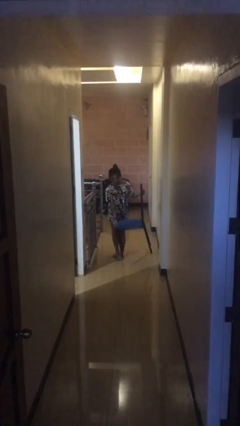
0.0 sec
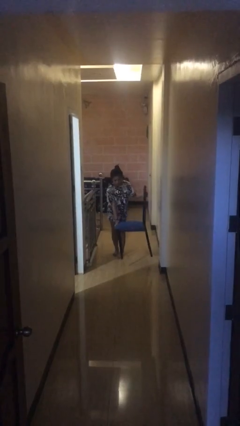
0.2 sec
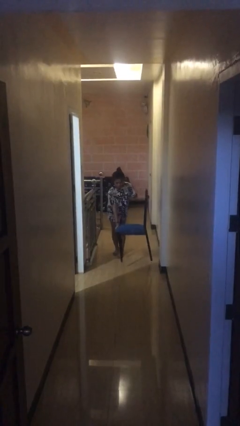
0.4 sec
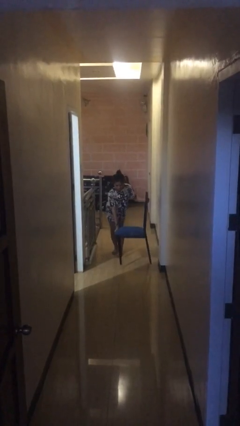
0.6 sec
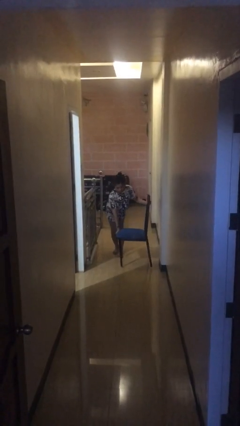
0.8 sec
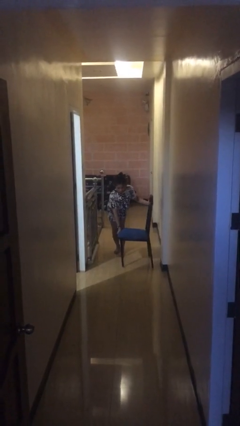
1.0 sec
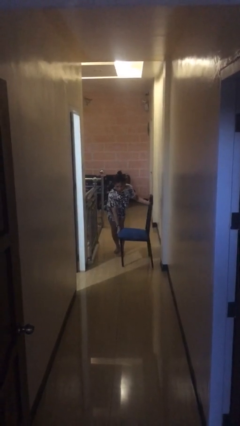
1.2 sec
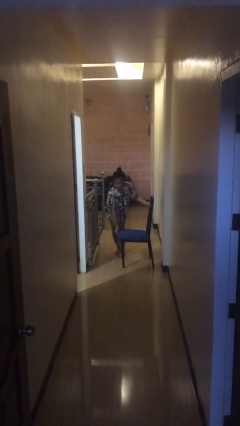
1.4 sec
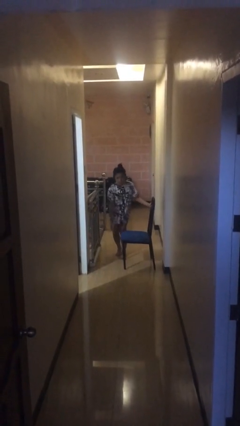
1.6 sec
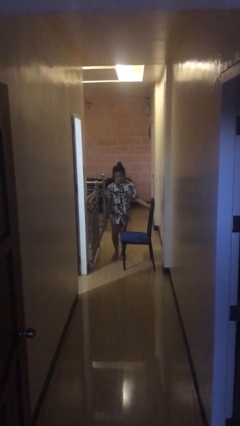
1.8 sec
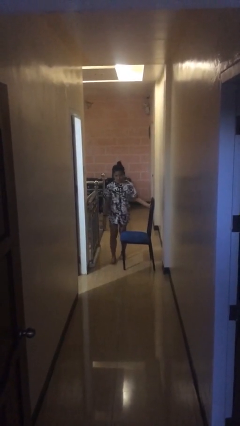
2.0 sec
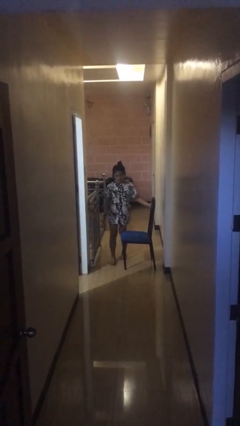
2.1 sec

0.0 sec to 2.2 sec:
person puts down object on floor

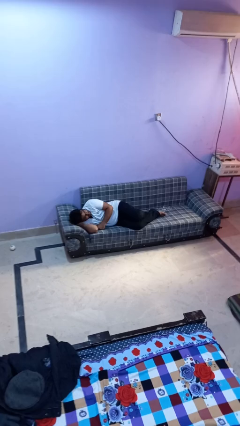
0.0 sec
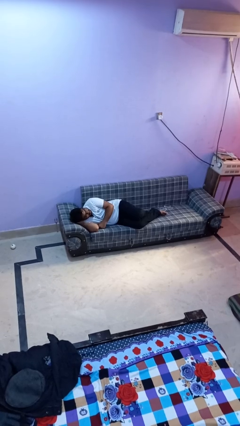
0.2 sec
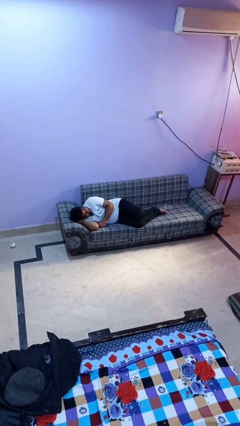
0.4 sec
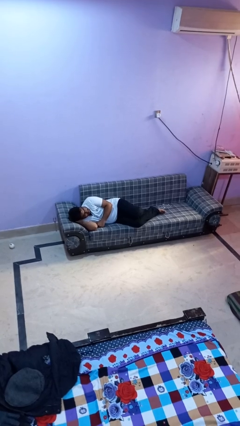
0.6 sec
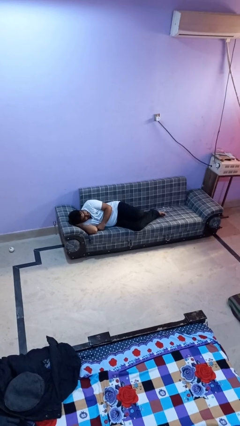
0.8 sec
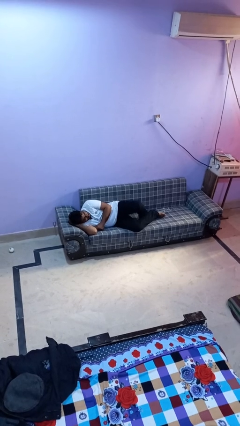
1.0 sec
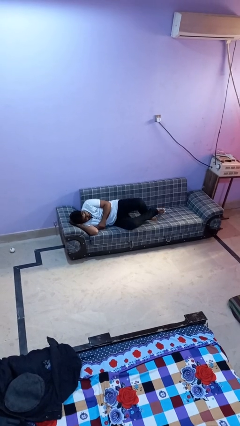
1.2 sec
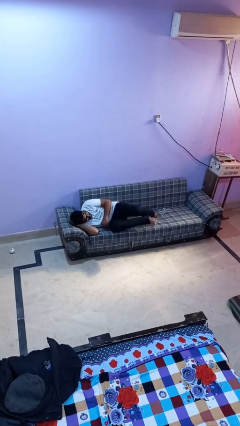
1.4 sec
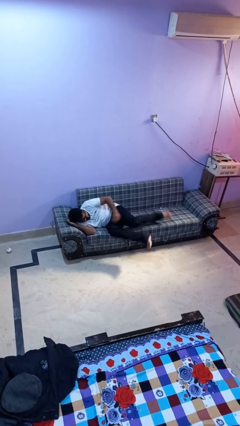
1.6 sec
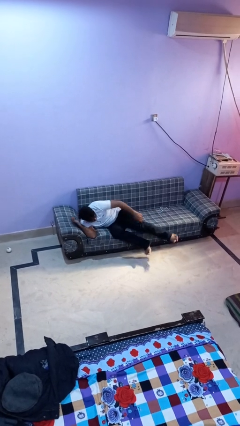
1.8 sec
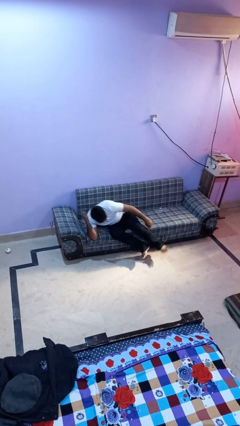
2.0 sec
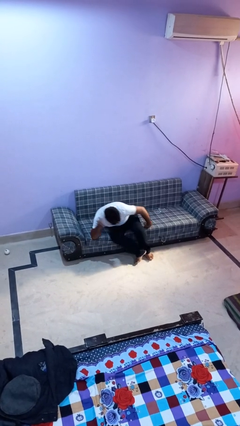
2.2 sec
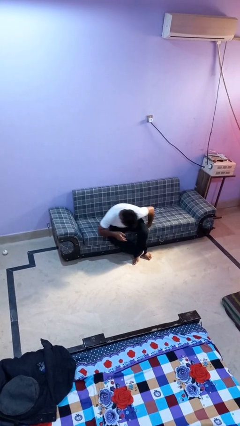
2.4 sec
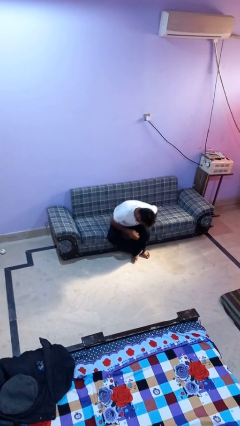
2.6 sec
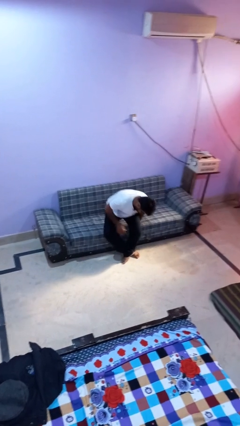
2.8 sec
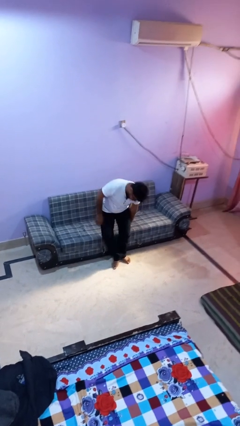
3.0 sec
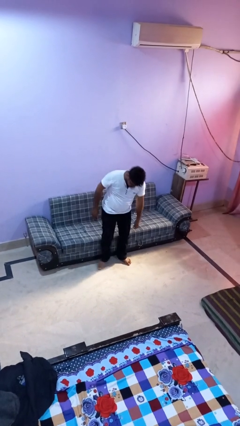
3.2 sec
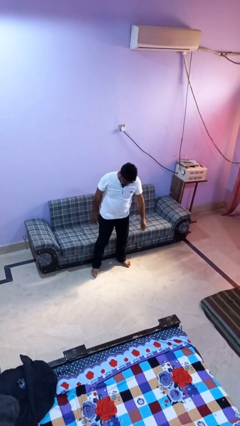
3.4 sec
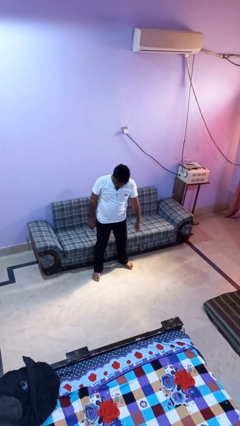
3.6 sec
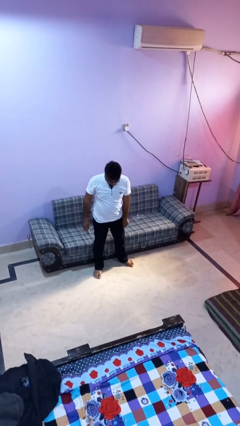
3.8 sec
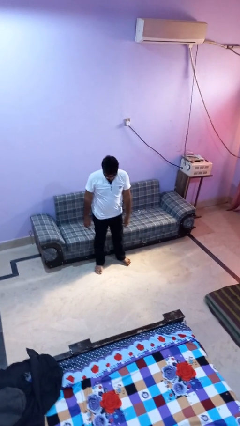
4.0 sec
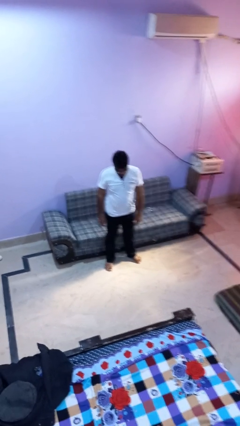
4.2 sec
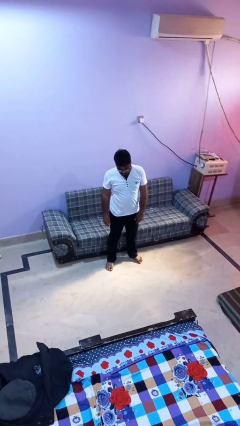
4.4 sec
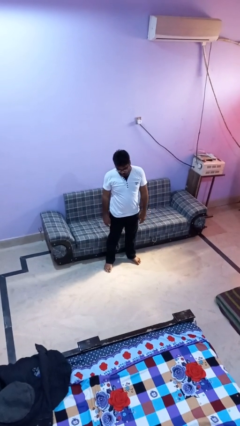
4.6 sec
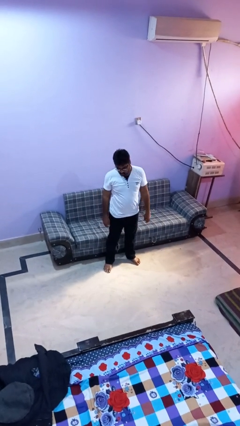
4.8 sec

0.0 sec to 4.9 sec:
person stands up

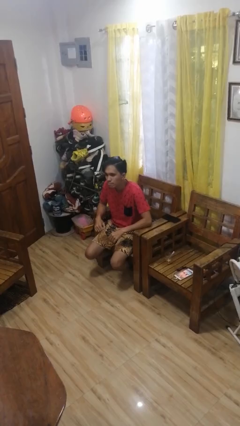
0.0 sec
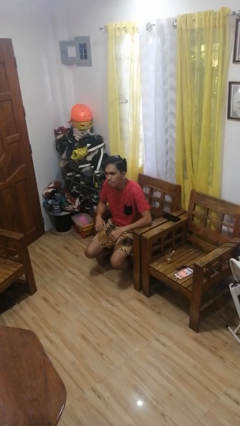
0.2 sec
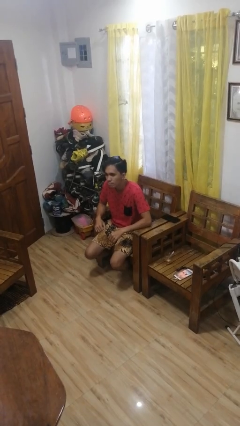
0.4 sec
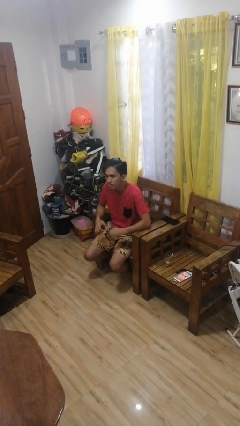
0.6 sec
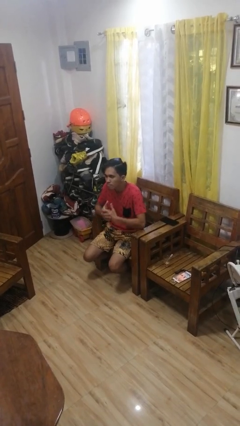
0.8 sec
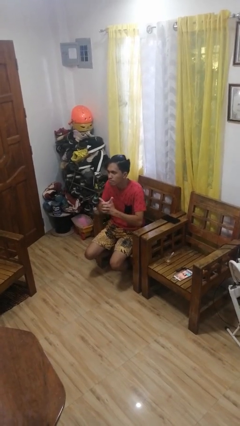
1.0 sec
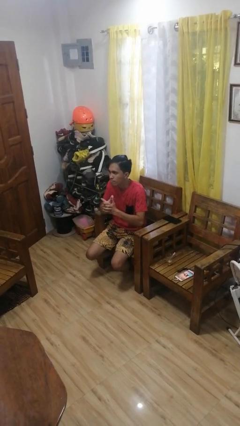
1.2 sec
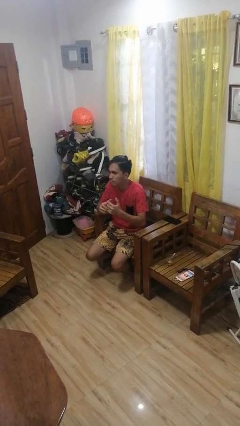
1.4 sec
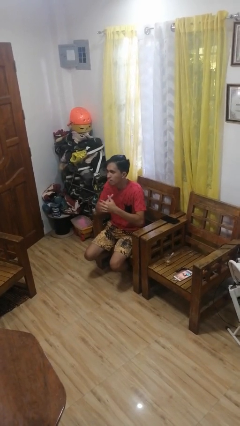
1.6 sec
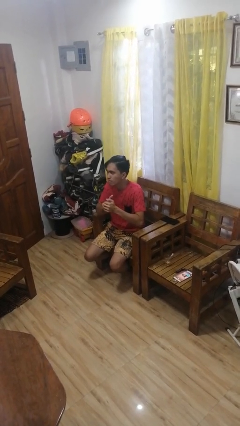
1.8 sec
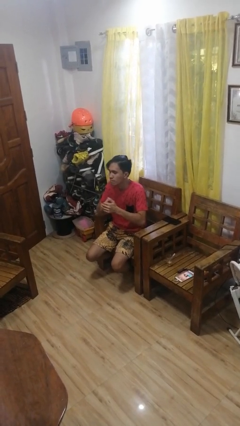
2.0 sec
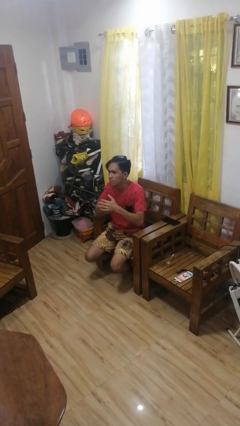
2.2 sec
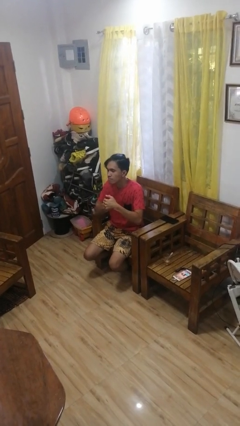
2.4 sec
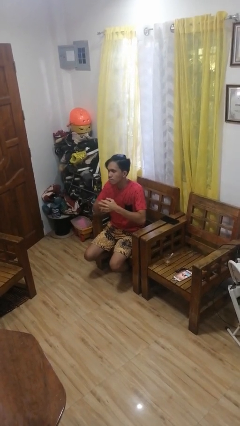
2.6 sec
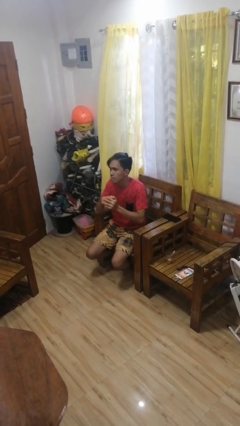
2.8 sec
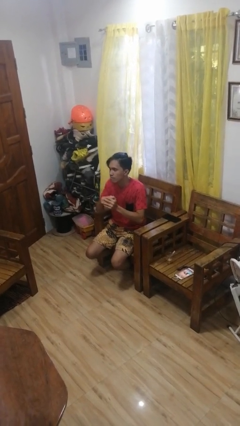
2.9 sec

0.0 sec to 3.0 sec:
person cracks knuckles

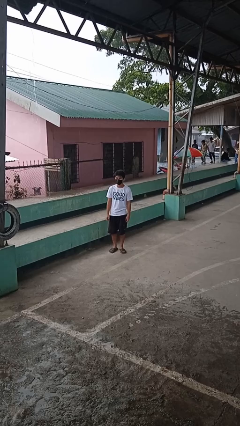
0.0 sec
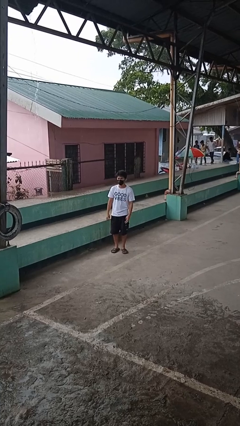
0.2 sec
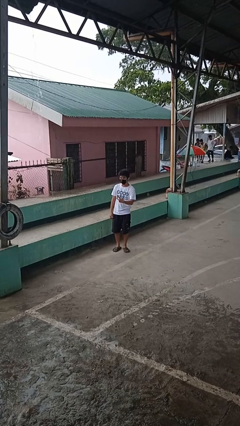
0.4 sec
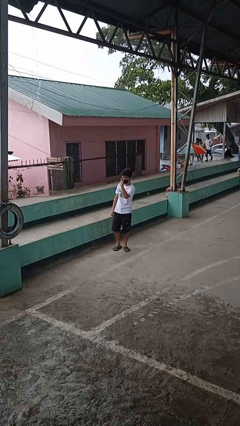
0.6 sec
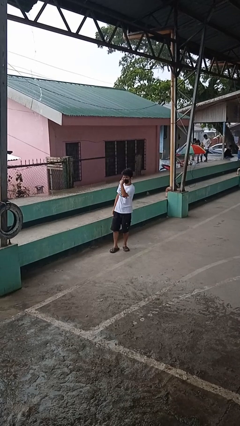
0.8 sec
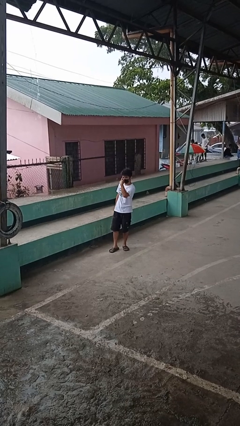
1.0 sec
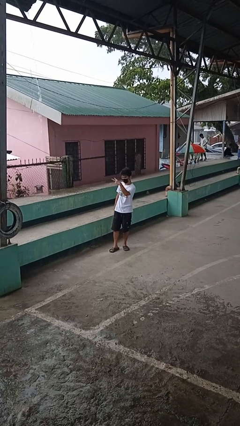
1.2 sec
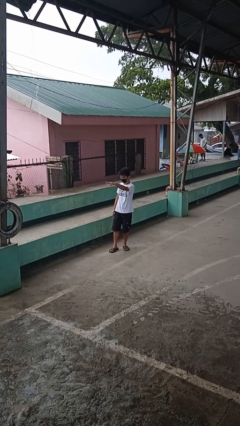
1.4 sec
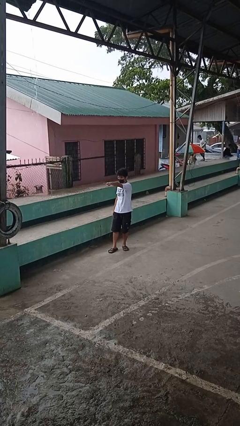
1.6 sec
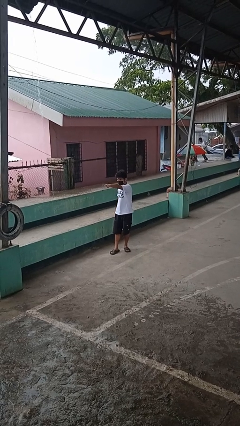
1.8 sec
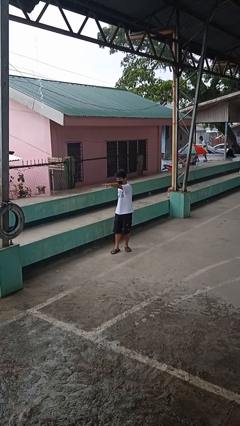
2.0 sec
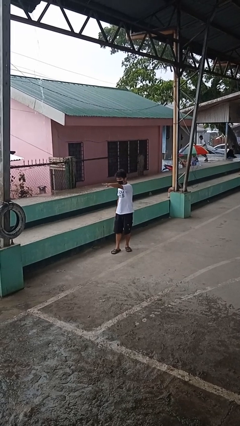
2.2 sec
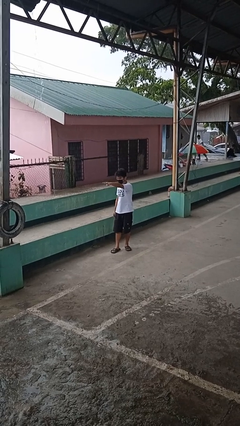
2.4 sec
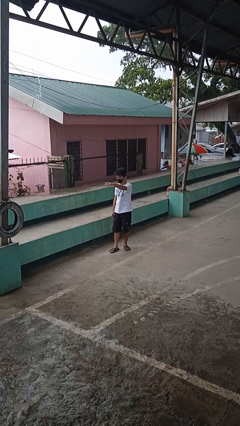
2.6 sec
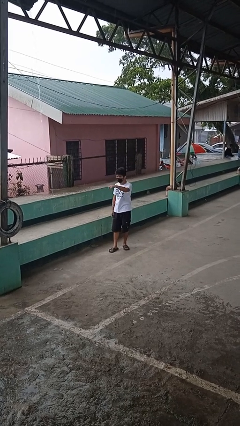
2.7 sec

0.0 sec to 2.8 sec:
person gestures watch closely

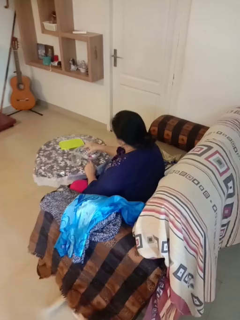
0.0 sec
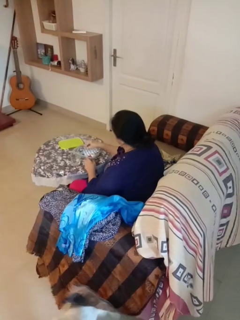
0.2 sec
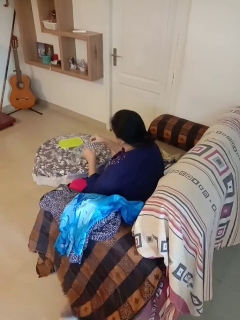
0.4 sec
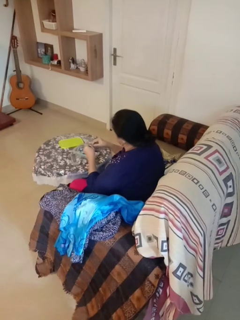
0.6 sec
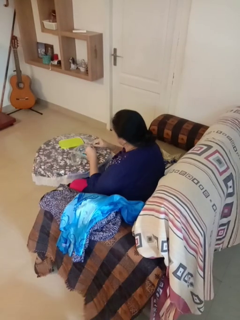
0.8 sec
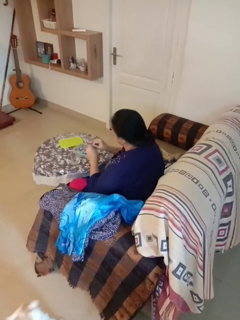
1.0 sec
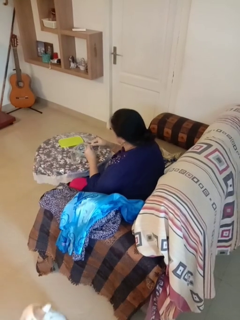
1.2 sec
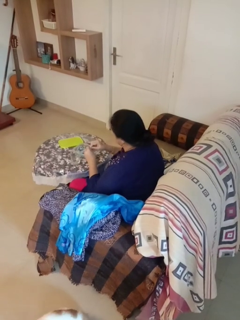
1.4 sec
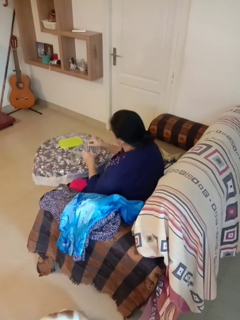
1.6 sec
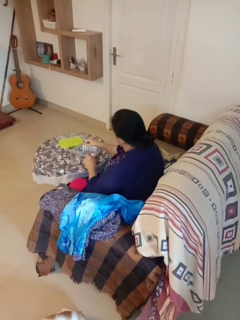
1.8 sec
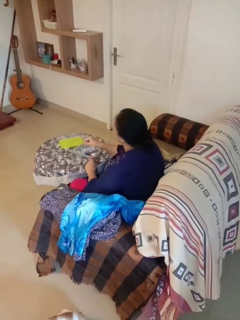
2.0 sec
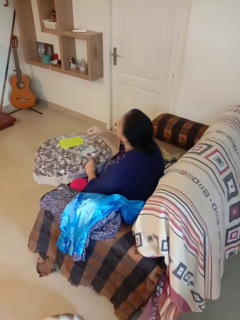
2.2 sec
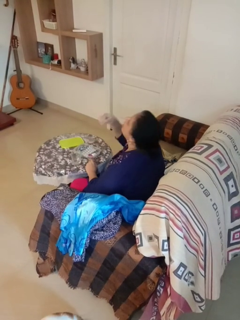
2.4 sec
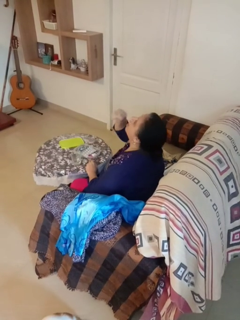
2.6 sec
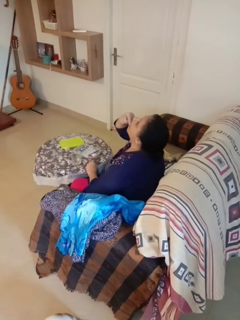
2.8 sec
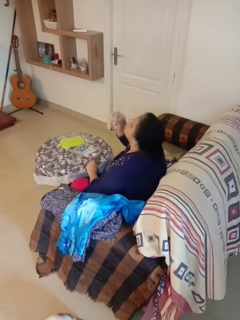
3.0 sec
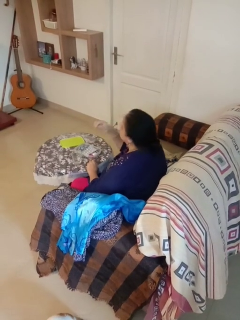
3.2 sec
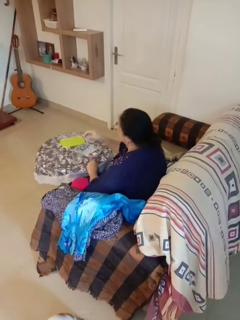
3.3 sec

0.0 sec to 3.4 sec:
person takes medicine pills

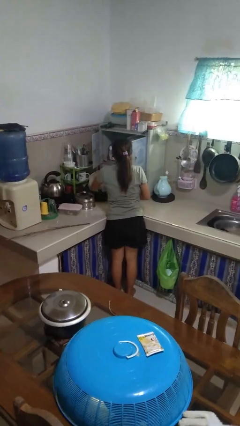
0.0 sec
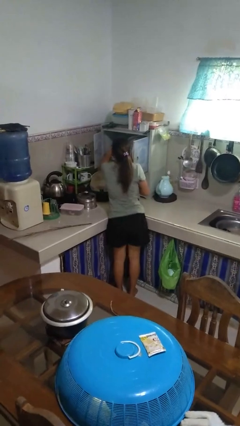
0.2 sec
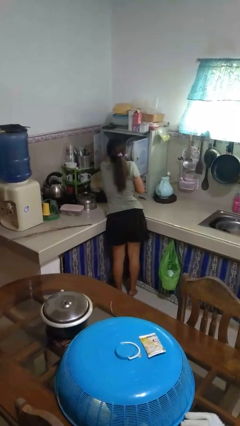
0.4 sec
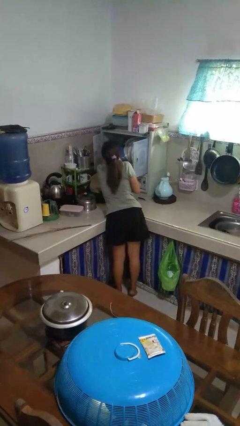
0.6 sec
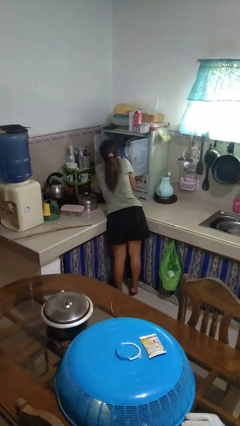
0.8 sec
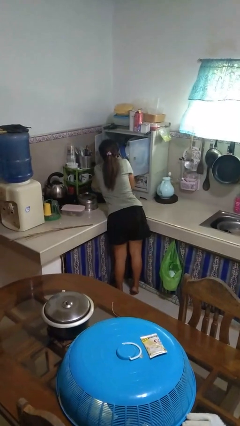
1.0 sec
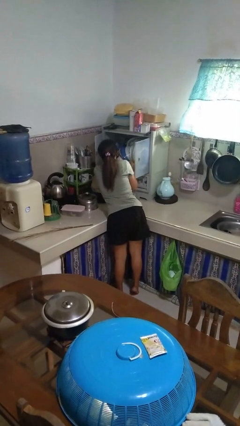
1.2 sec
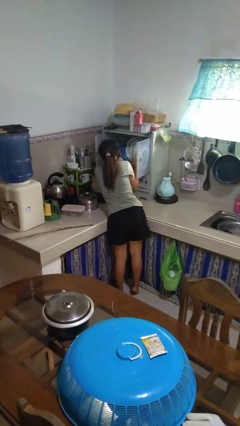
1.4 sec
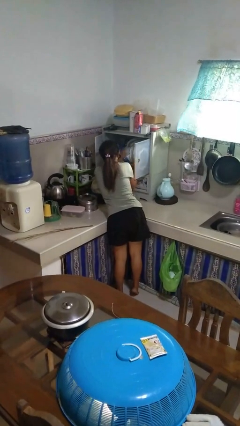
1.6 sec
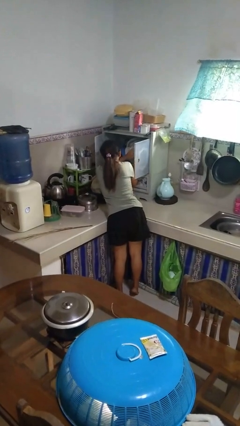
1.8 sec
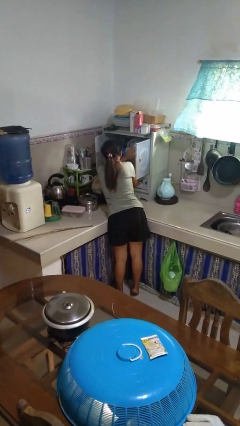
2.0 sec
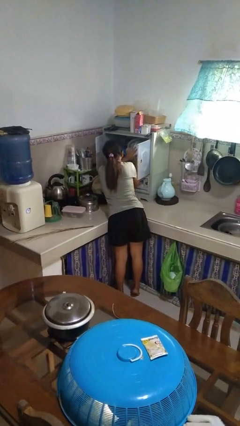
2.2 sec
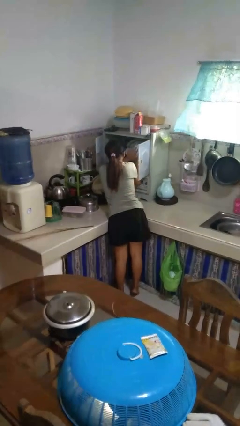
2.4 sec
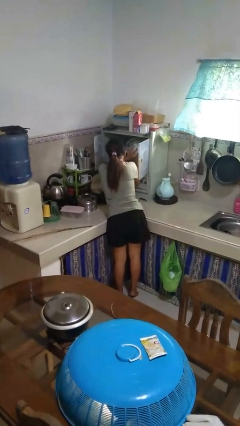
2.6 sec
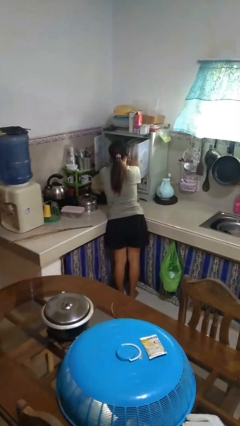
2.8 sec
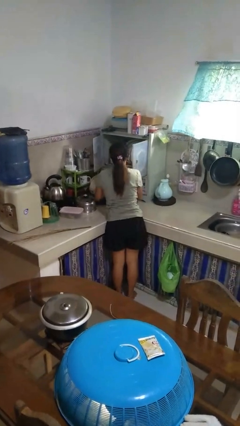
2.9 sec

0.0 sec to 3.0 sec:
person searches in kitchen drawer
